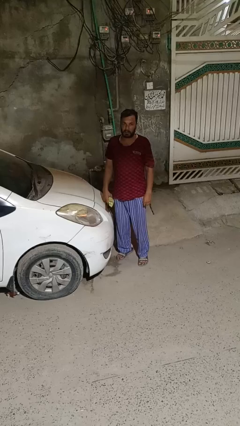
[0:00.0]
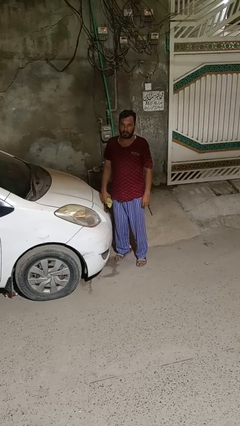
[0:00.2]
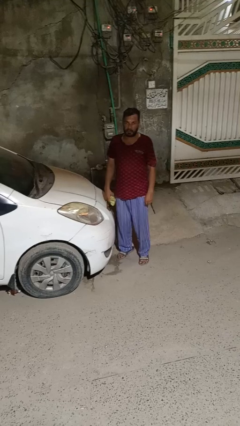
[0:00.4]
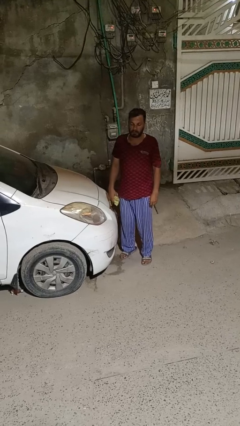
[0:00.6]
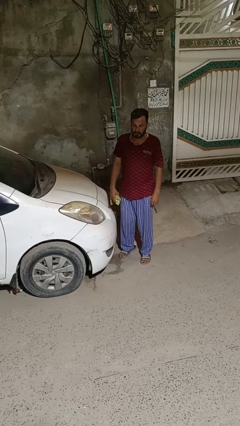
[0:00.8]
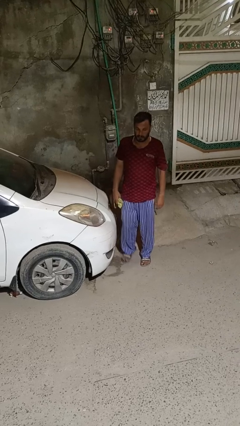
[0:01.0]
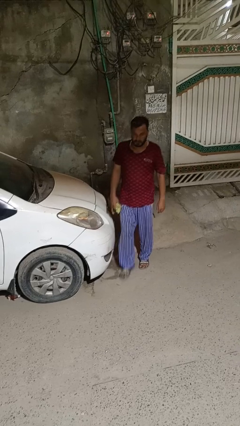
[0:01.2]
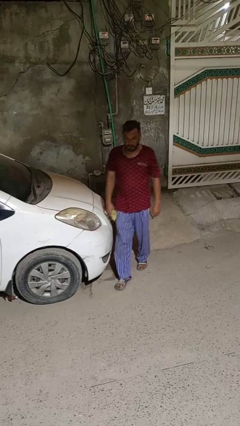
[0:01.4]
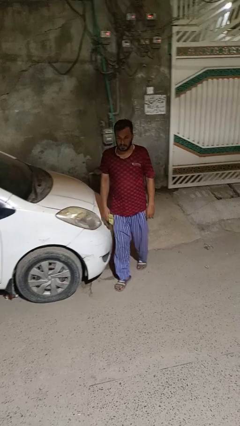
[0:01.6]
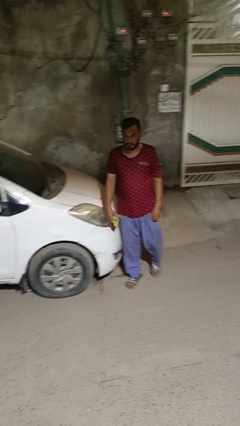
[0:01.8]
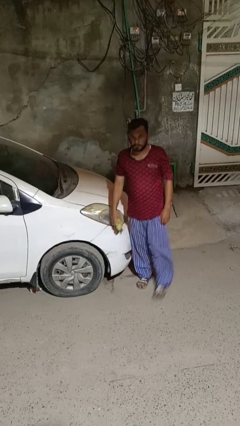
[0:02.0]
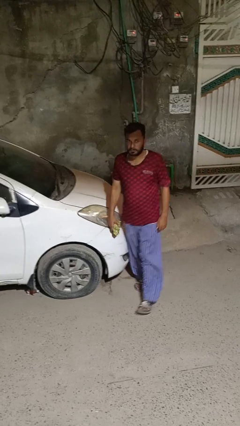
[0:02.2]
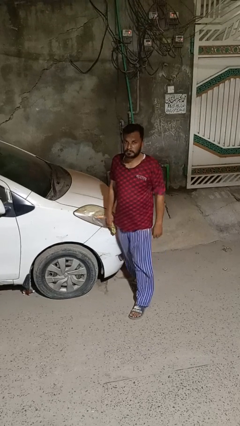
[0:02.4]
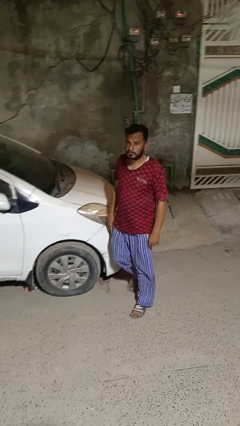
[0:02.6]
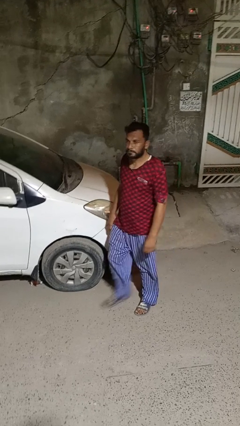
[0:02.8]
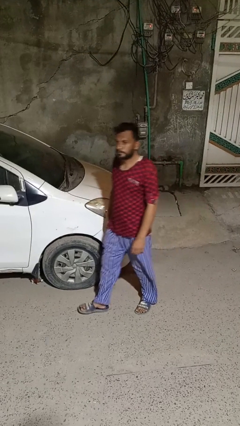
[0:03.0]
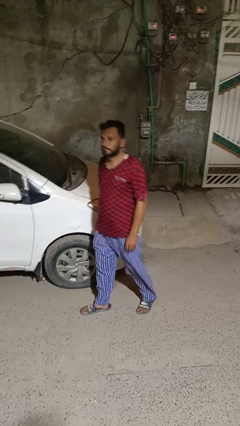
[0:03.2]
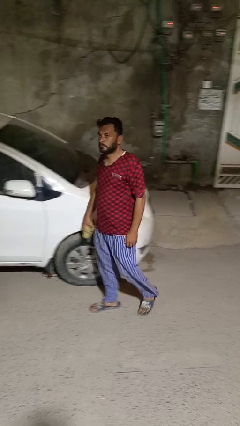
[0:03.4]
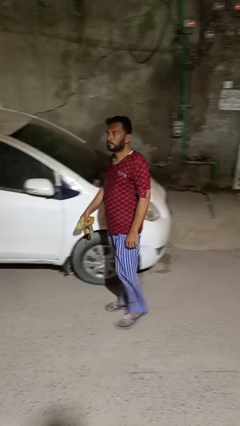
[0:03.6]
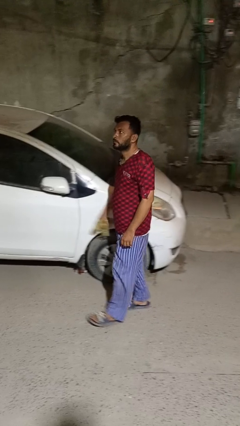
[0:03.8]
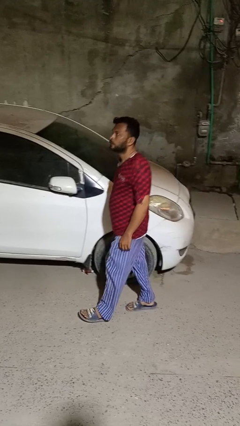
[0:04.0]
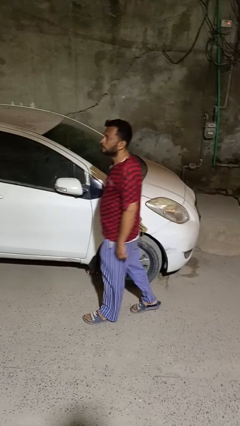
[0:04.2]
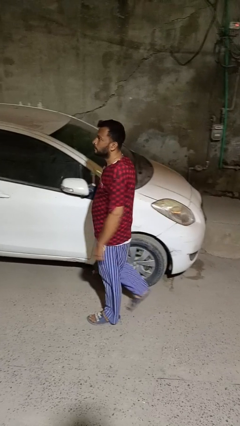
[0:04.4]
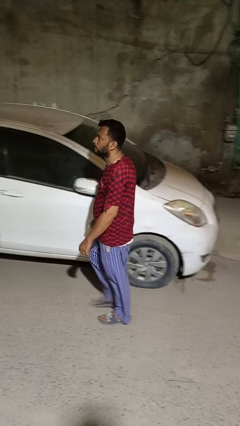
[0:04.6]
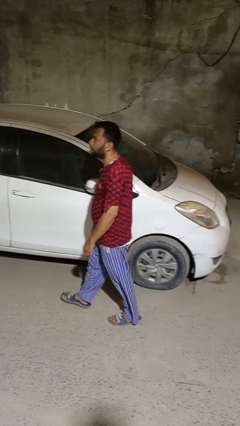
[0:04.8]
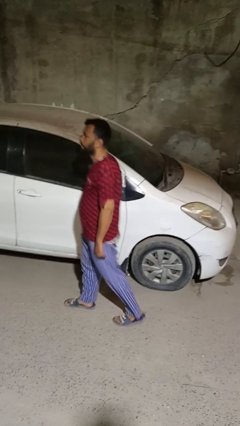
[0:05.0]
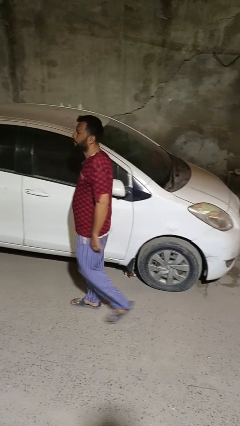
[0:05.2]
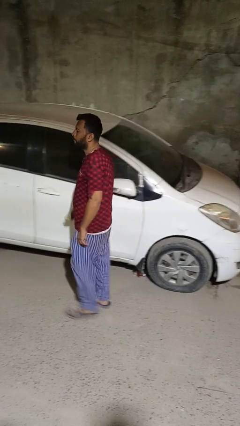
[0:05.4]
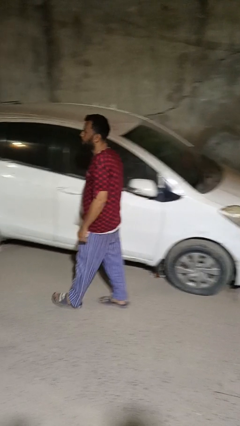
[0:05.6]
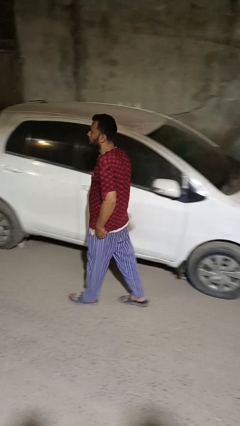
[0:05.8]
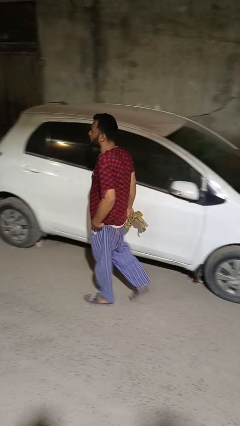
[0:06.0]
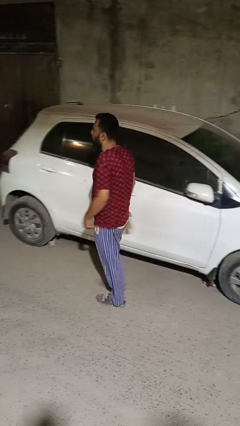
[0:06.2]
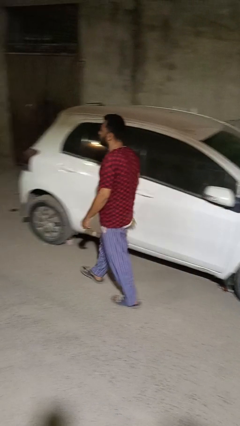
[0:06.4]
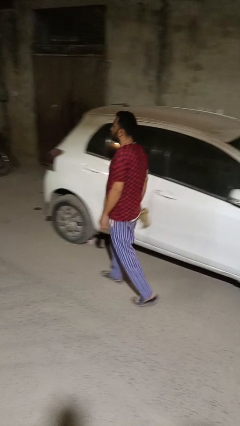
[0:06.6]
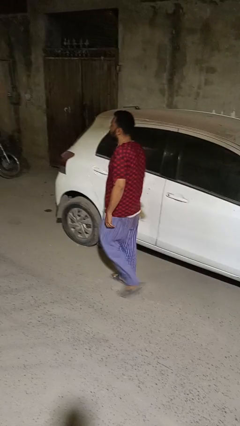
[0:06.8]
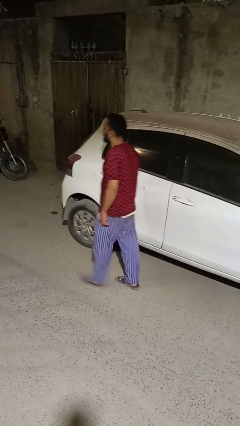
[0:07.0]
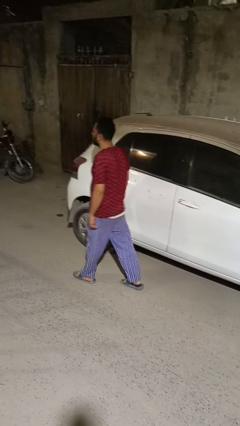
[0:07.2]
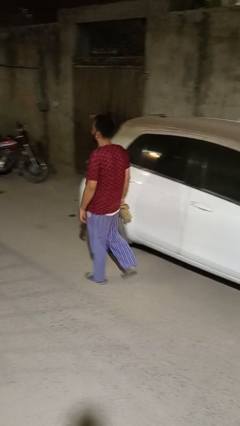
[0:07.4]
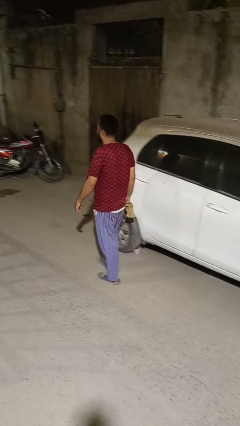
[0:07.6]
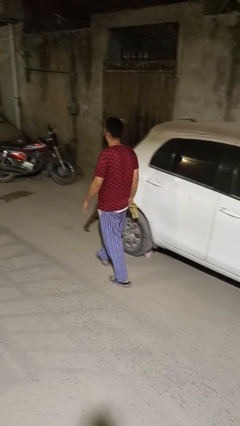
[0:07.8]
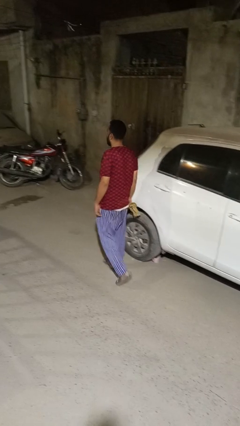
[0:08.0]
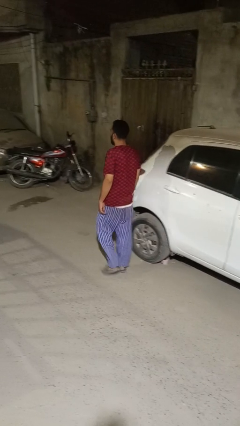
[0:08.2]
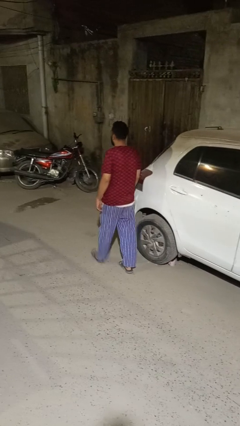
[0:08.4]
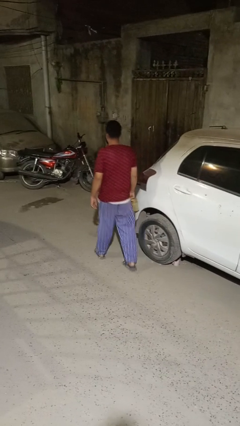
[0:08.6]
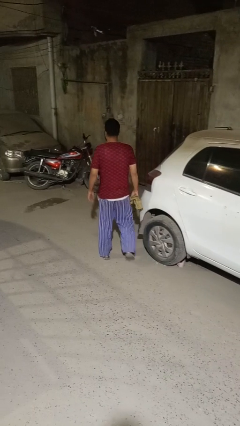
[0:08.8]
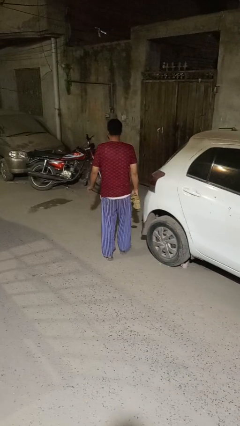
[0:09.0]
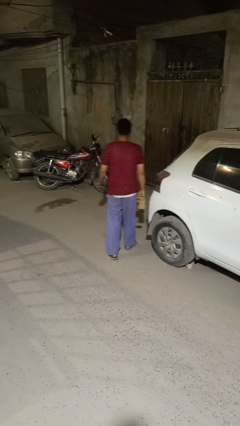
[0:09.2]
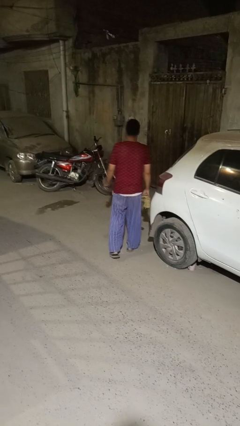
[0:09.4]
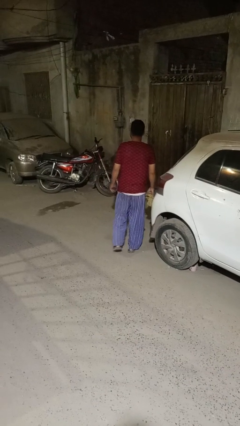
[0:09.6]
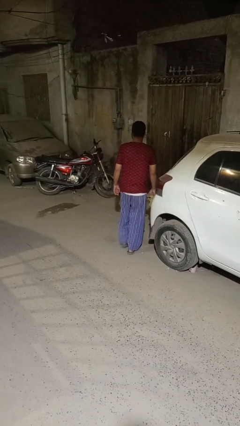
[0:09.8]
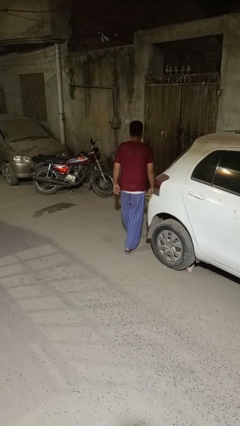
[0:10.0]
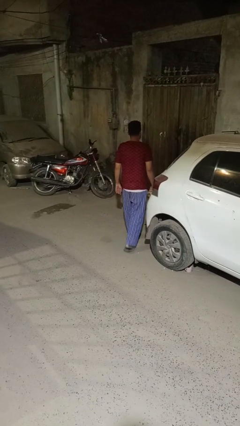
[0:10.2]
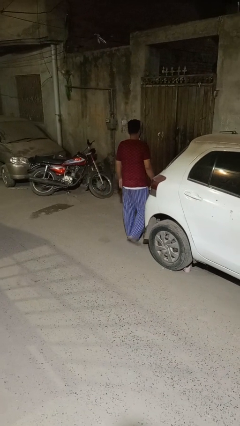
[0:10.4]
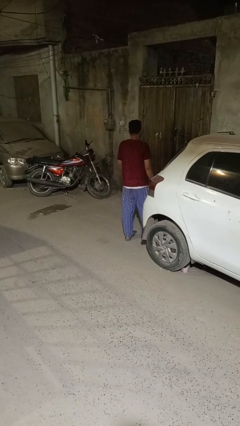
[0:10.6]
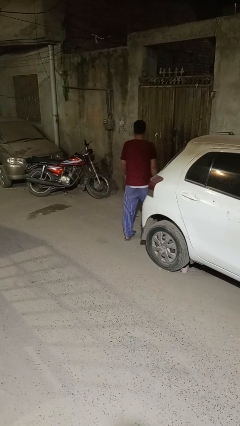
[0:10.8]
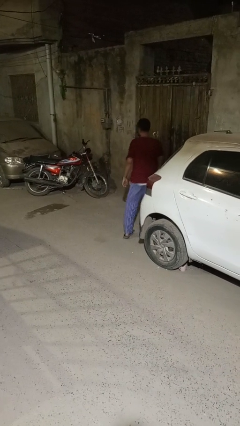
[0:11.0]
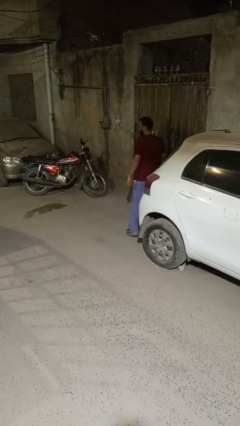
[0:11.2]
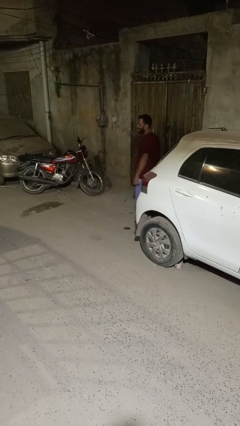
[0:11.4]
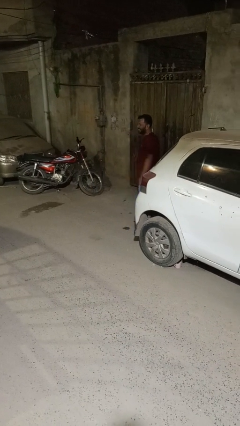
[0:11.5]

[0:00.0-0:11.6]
person walks around car

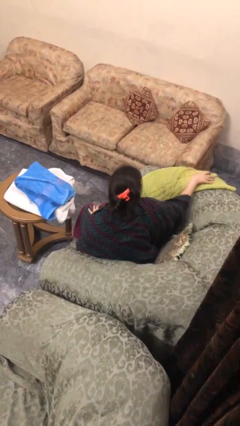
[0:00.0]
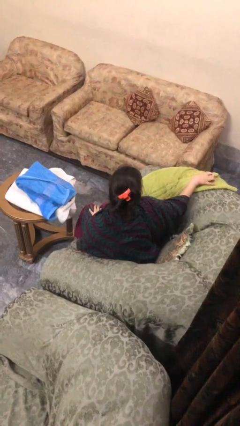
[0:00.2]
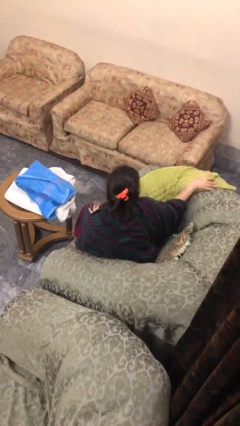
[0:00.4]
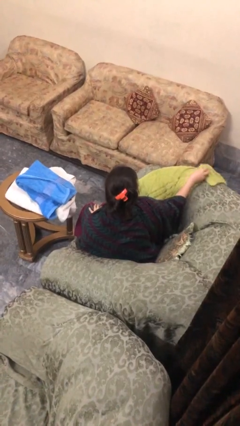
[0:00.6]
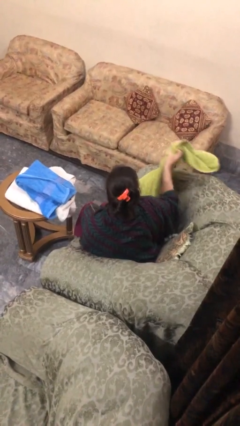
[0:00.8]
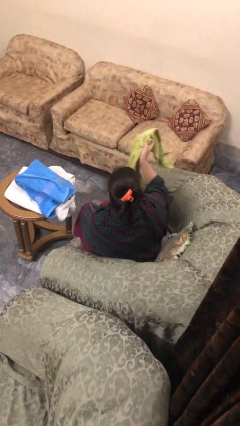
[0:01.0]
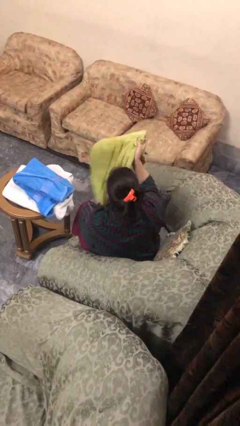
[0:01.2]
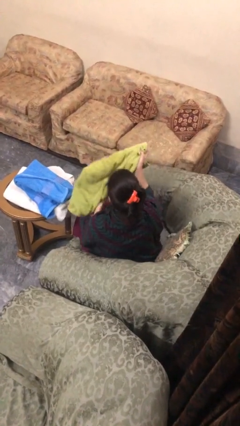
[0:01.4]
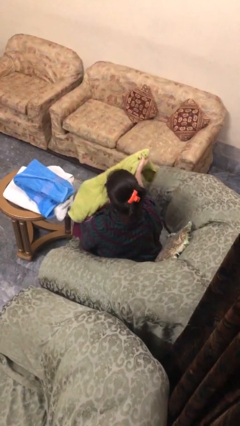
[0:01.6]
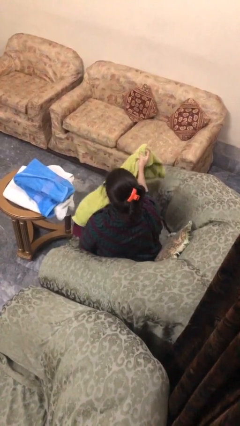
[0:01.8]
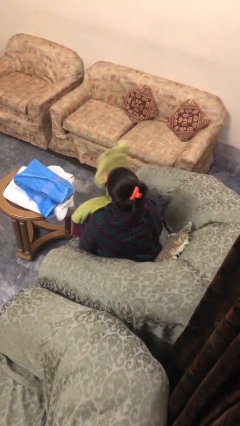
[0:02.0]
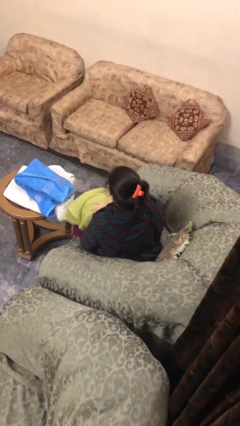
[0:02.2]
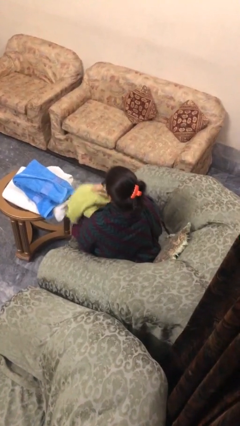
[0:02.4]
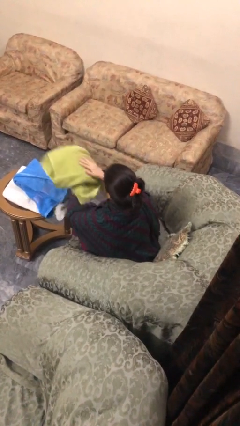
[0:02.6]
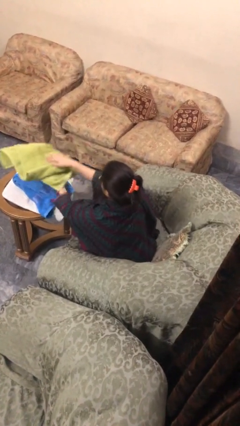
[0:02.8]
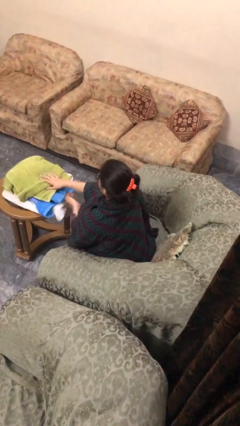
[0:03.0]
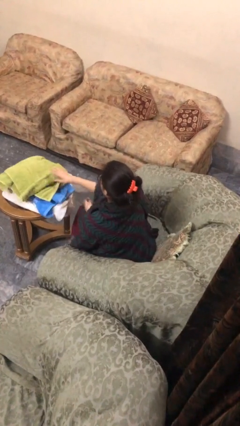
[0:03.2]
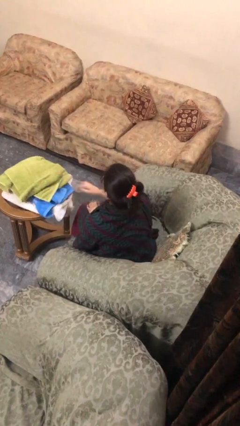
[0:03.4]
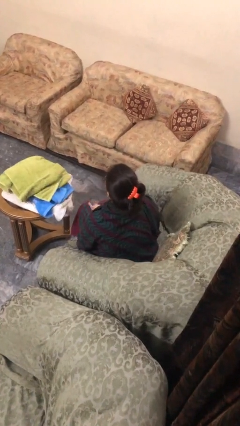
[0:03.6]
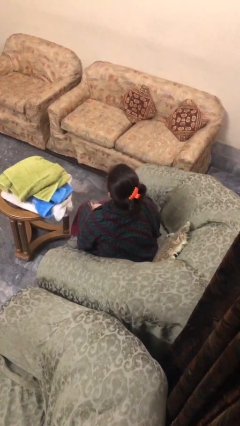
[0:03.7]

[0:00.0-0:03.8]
person folds towel

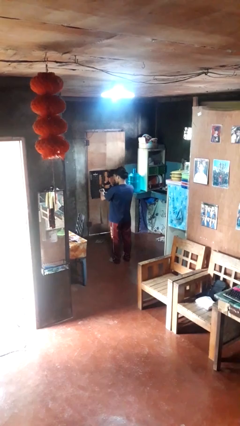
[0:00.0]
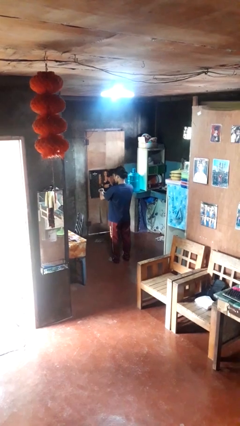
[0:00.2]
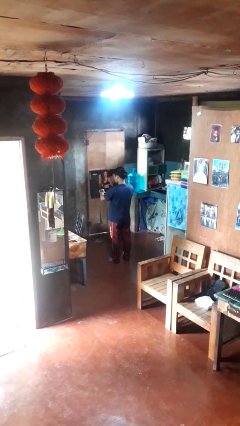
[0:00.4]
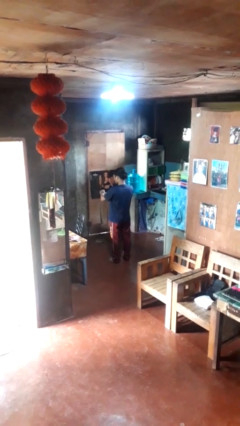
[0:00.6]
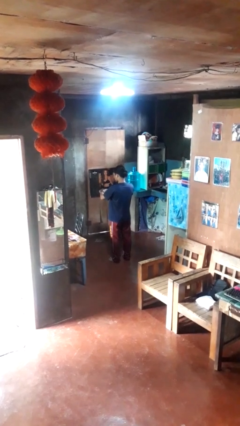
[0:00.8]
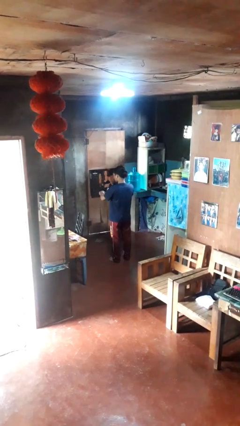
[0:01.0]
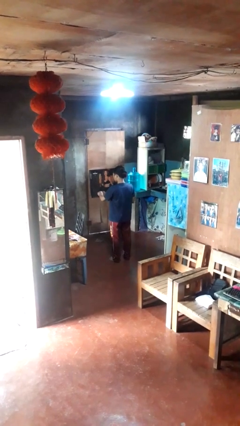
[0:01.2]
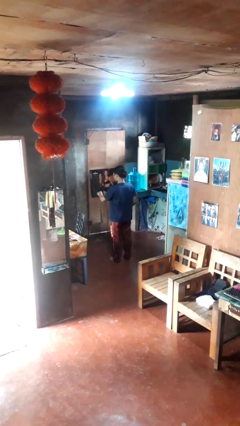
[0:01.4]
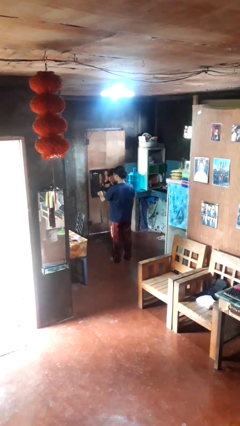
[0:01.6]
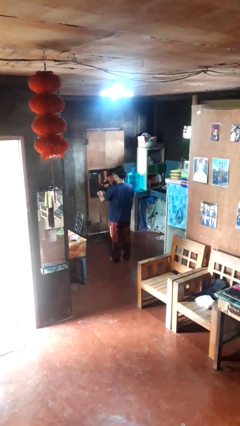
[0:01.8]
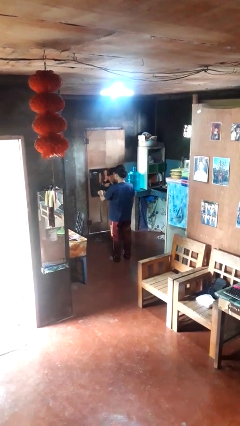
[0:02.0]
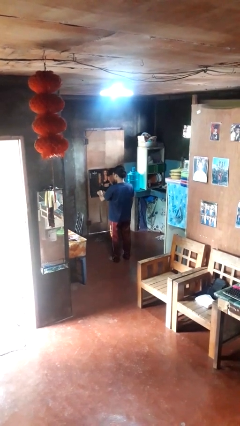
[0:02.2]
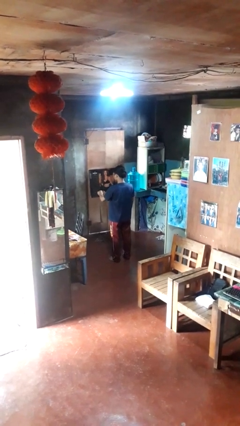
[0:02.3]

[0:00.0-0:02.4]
person takes off wristwatch

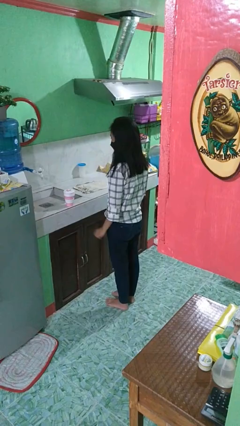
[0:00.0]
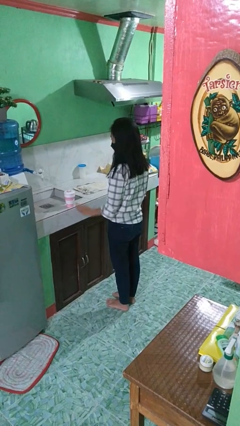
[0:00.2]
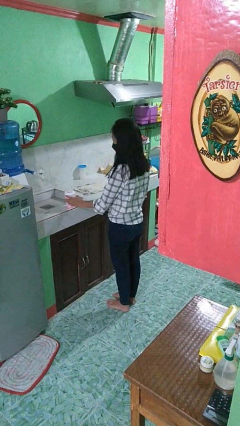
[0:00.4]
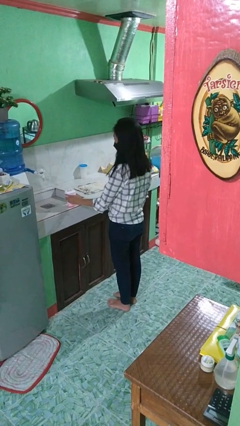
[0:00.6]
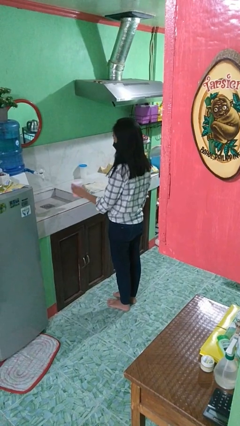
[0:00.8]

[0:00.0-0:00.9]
person picks up object from countertop
